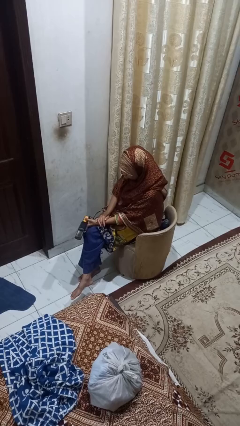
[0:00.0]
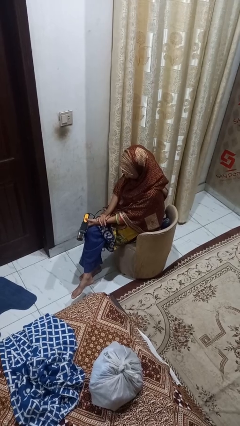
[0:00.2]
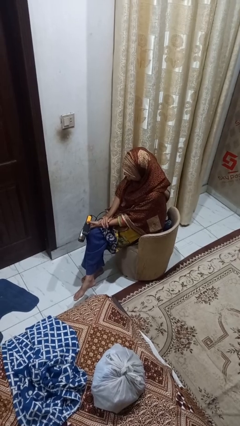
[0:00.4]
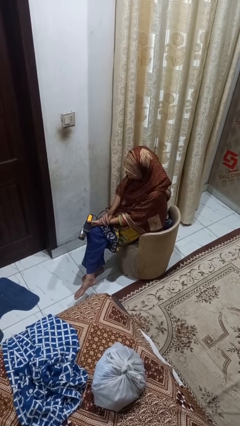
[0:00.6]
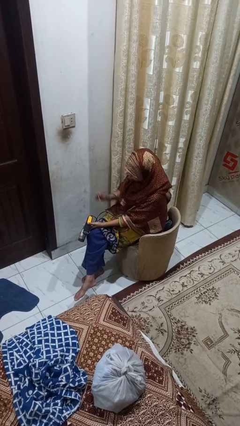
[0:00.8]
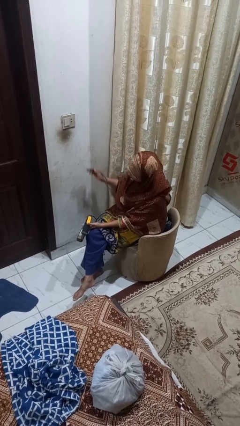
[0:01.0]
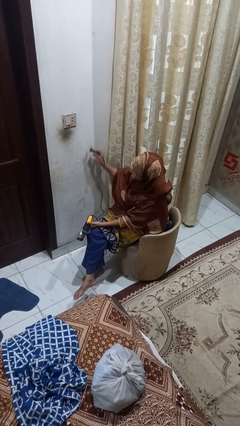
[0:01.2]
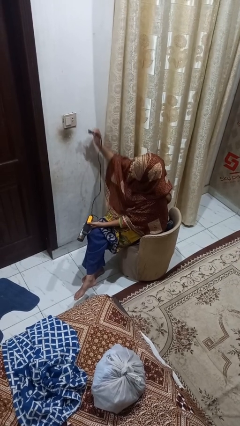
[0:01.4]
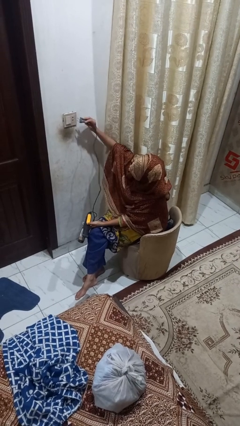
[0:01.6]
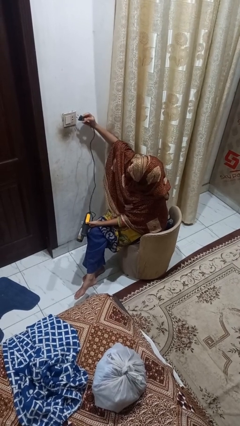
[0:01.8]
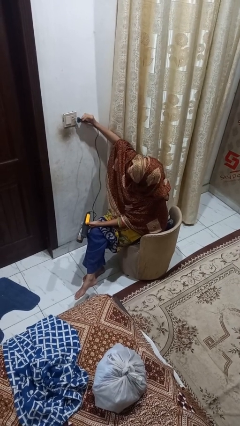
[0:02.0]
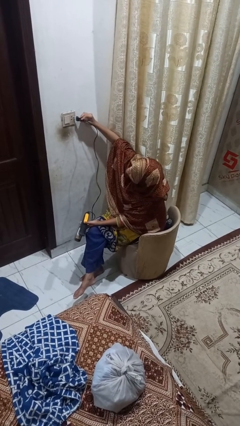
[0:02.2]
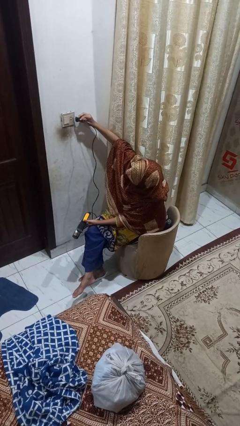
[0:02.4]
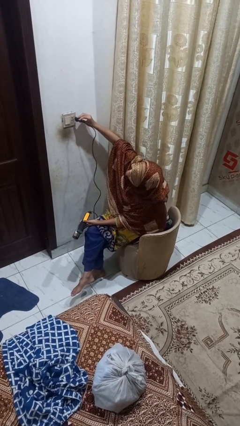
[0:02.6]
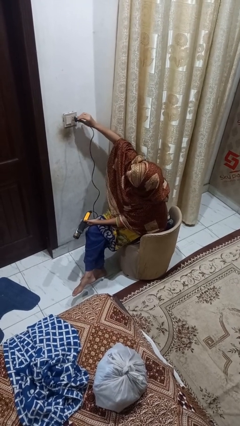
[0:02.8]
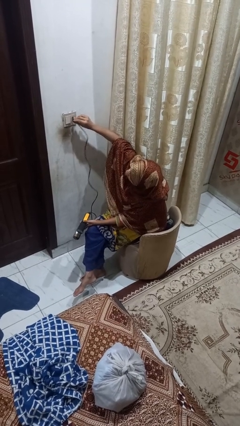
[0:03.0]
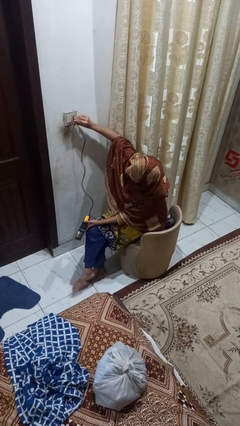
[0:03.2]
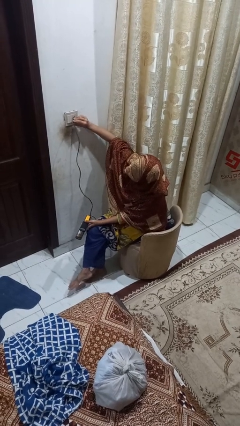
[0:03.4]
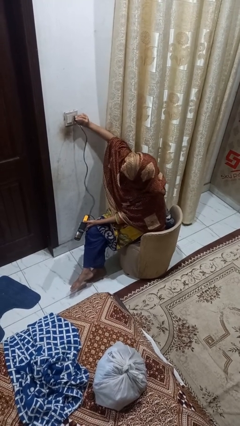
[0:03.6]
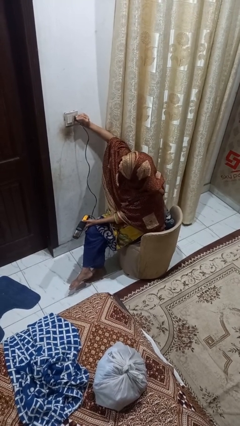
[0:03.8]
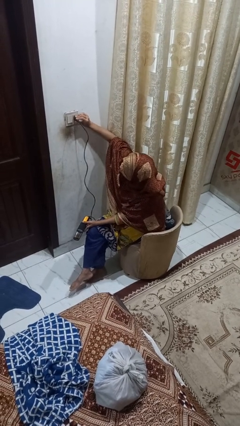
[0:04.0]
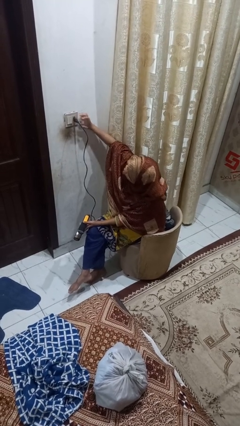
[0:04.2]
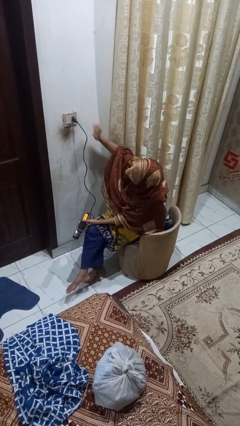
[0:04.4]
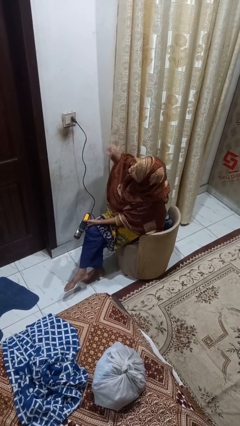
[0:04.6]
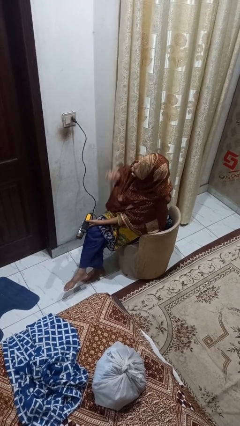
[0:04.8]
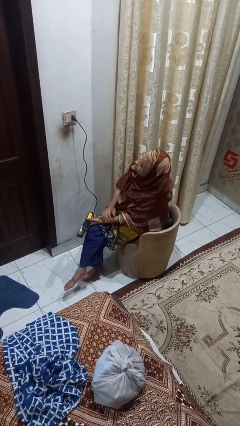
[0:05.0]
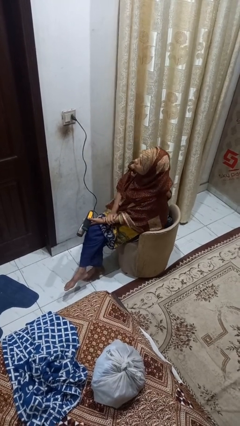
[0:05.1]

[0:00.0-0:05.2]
person plugs into electrical socket

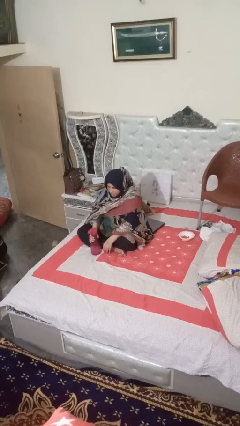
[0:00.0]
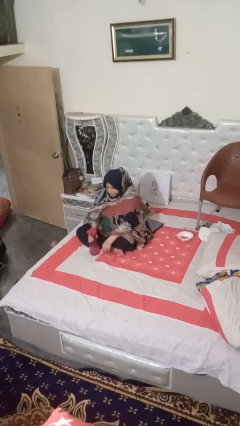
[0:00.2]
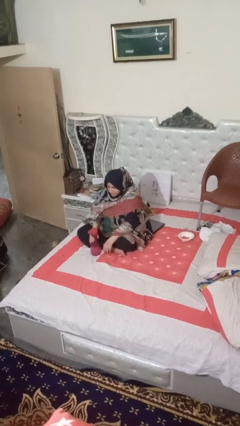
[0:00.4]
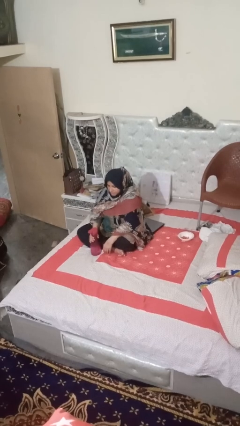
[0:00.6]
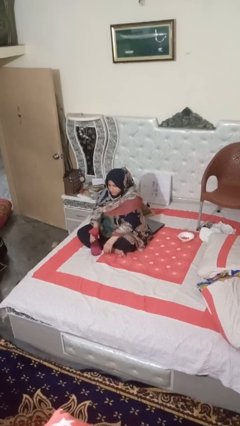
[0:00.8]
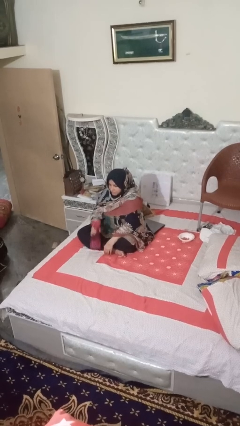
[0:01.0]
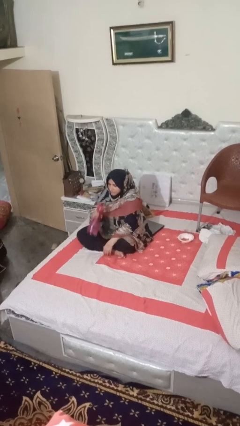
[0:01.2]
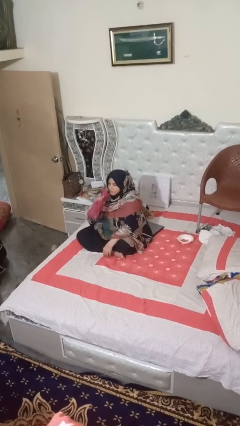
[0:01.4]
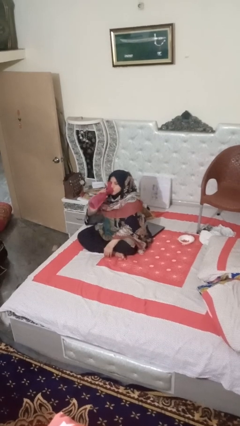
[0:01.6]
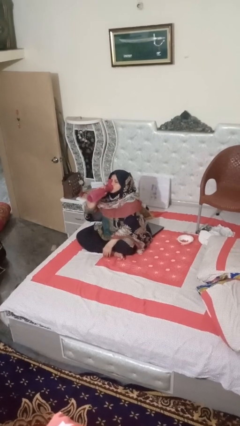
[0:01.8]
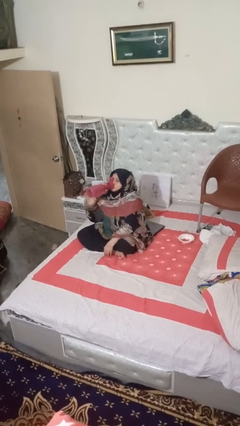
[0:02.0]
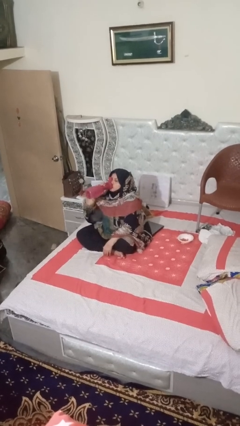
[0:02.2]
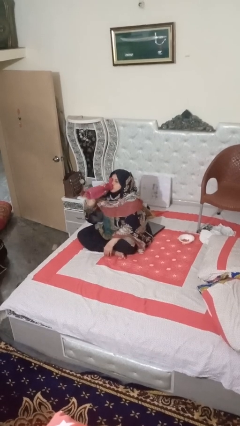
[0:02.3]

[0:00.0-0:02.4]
person drinks from bottle

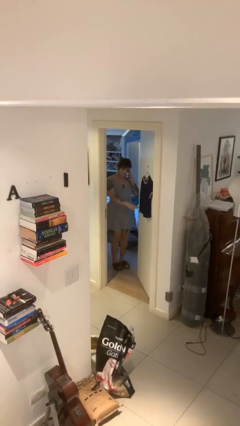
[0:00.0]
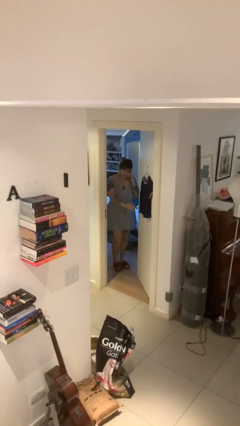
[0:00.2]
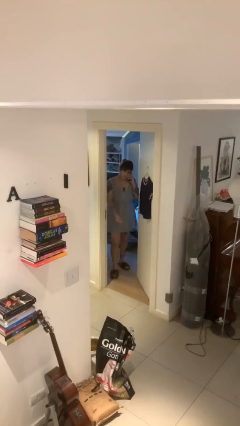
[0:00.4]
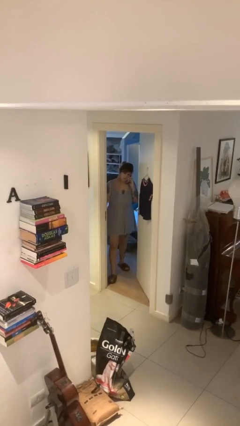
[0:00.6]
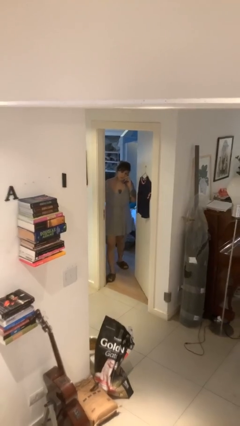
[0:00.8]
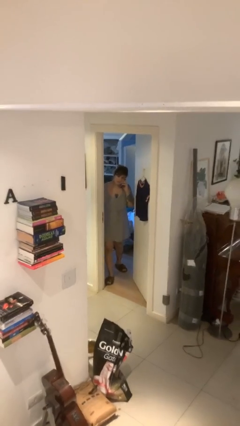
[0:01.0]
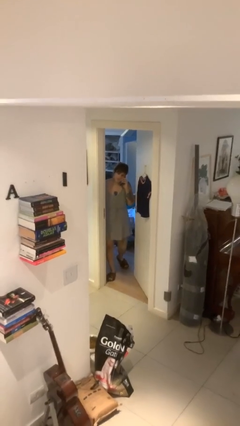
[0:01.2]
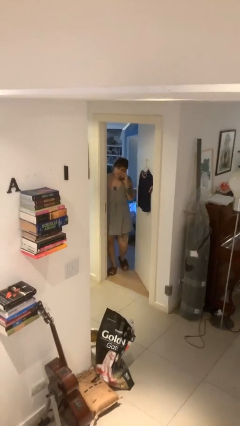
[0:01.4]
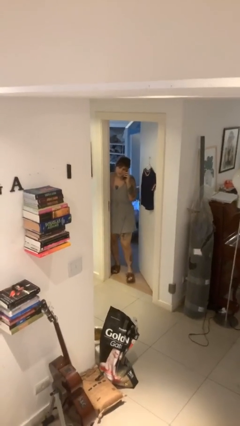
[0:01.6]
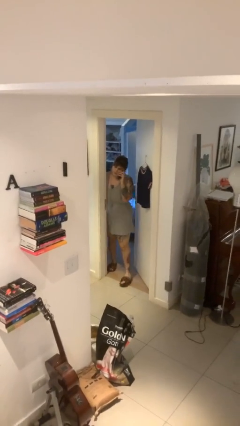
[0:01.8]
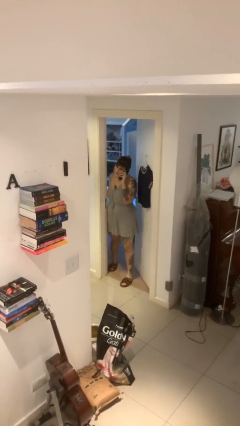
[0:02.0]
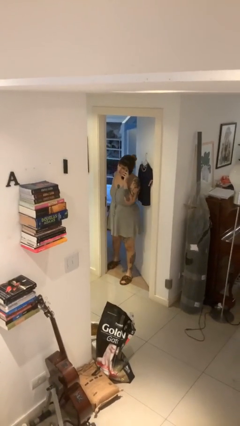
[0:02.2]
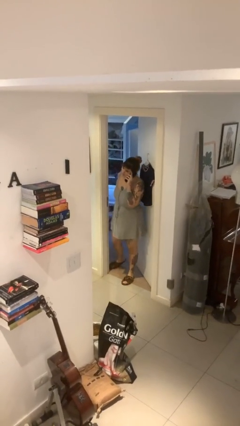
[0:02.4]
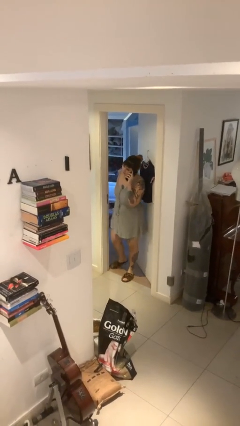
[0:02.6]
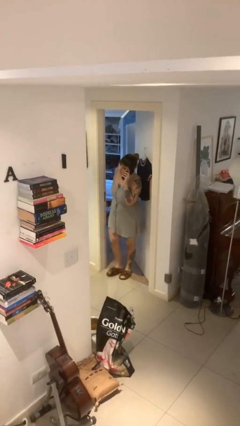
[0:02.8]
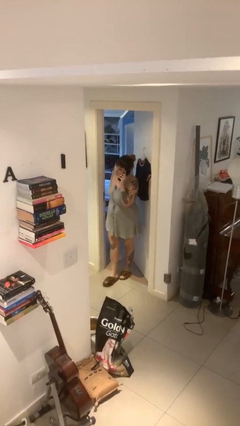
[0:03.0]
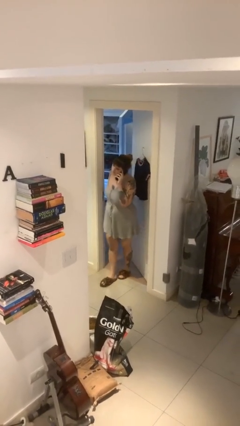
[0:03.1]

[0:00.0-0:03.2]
person enters scene through structure

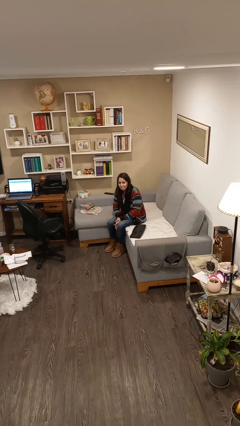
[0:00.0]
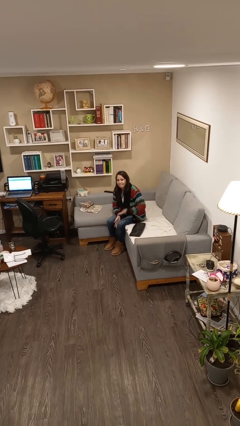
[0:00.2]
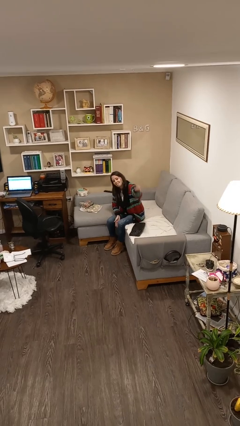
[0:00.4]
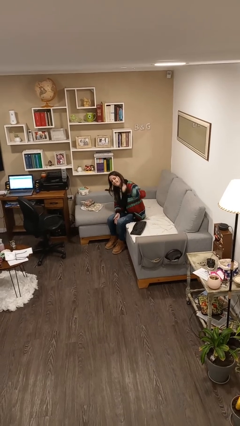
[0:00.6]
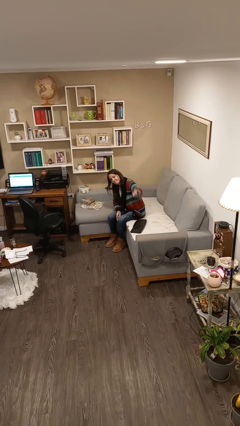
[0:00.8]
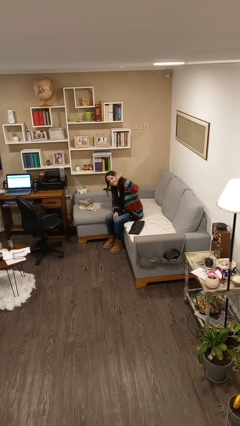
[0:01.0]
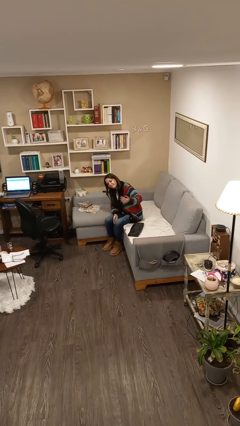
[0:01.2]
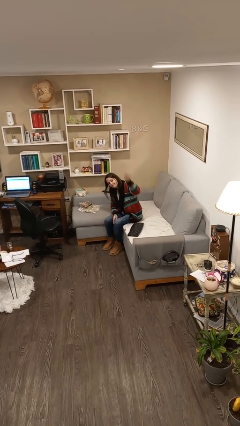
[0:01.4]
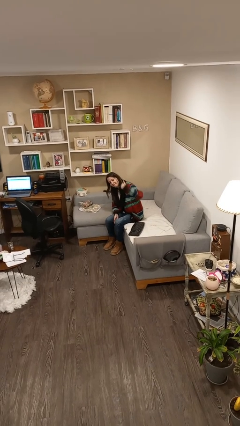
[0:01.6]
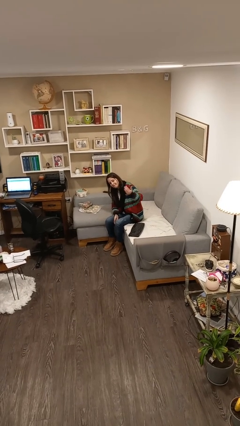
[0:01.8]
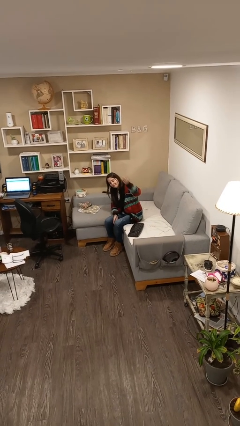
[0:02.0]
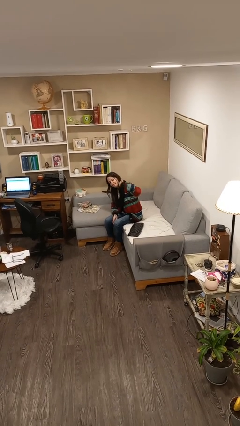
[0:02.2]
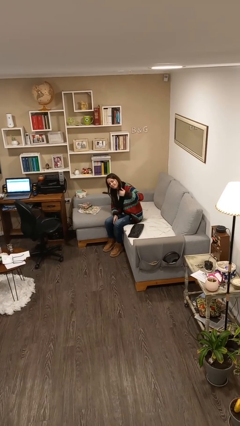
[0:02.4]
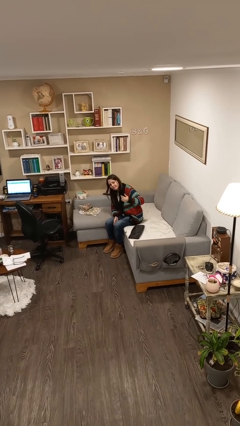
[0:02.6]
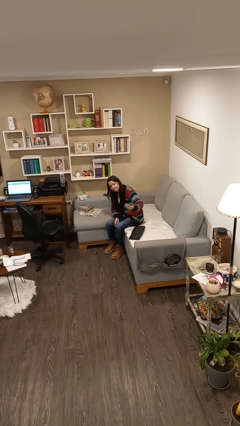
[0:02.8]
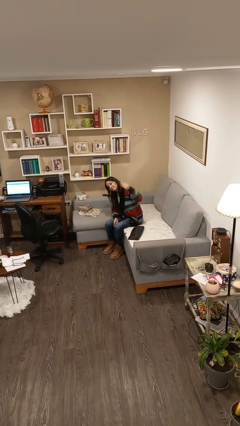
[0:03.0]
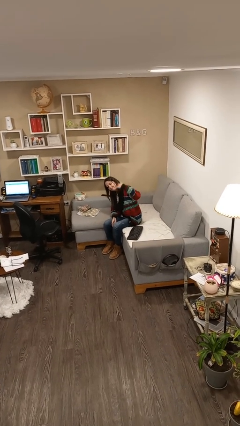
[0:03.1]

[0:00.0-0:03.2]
person gestures come here

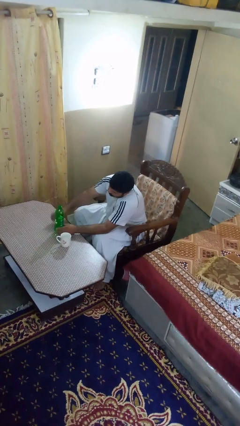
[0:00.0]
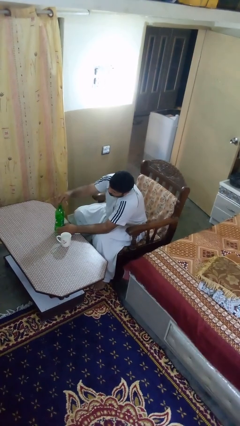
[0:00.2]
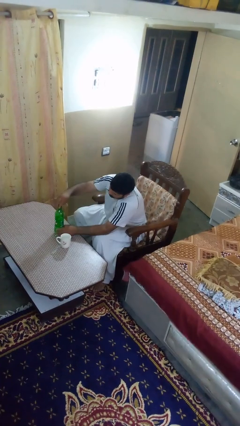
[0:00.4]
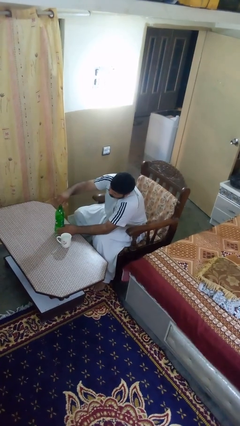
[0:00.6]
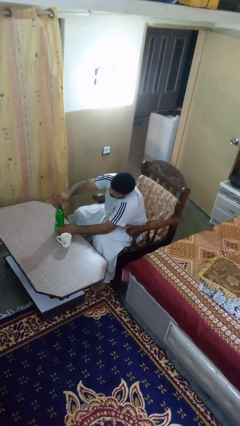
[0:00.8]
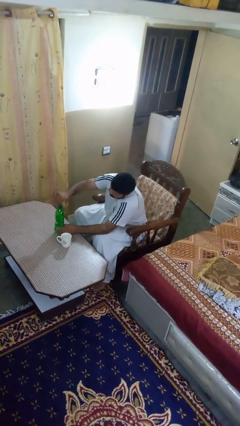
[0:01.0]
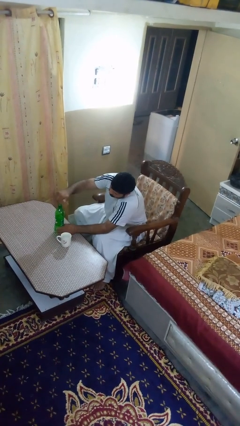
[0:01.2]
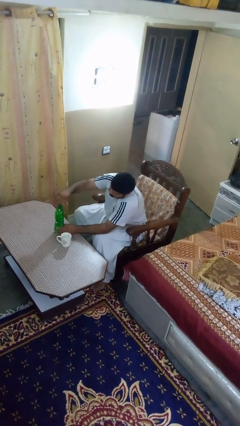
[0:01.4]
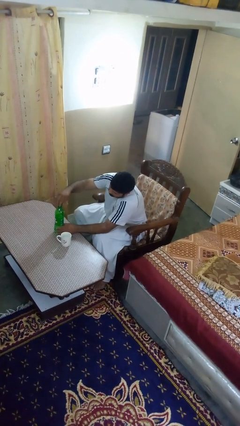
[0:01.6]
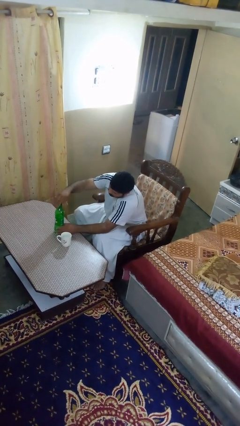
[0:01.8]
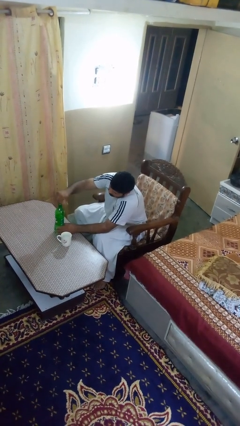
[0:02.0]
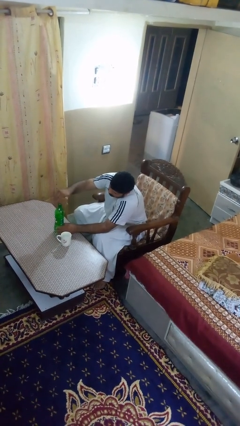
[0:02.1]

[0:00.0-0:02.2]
person screws lid to bottle

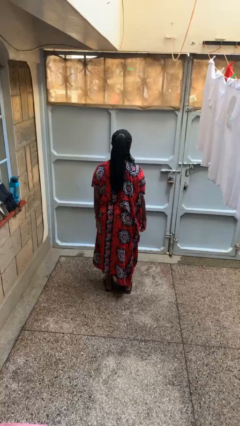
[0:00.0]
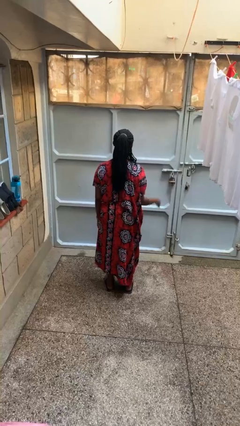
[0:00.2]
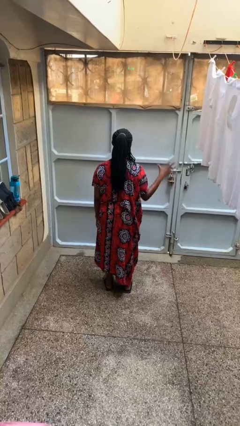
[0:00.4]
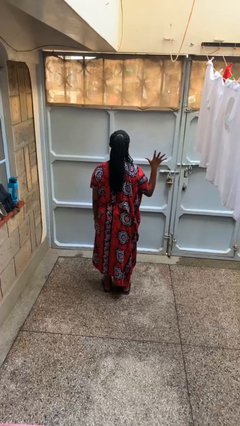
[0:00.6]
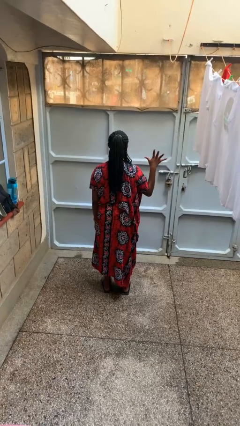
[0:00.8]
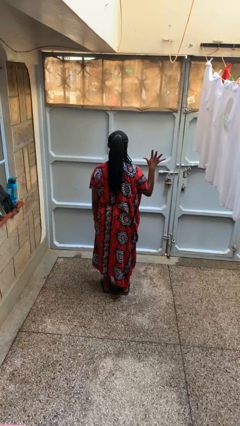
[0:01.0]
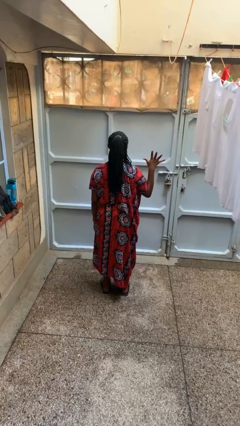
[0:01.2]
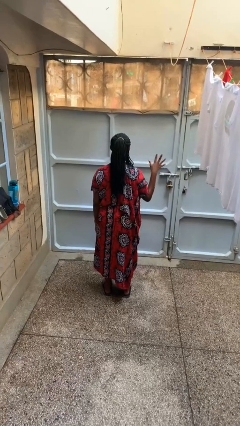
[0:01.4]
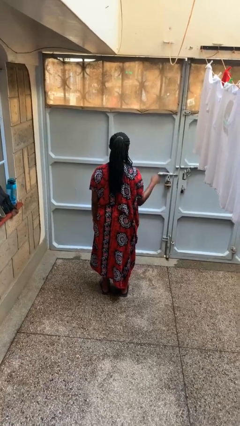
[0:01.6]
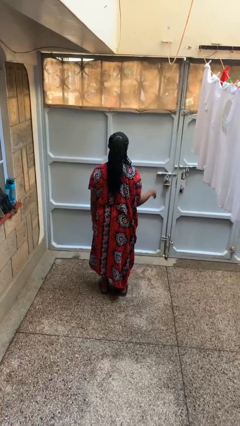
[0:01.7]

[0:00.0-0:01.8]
person gestures number five
